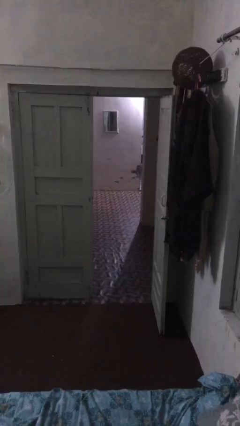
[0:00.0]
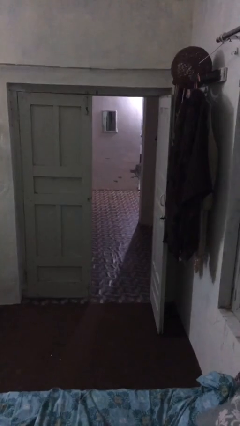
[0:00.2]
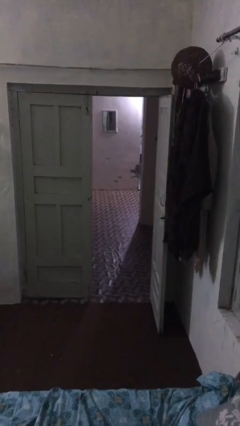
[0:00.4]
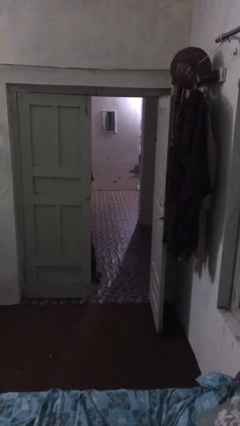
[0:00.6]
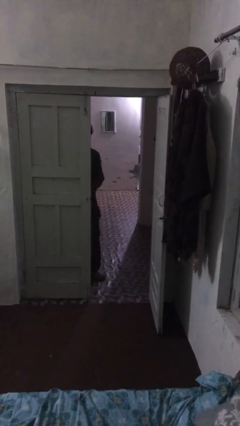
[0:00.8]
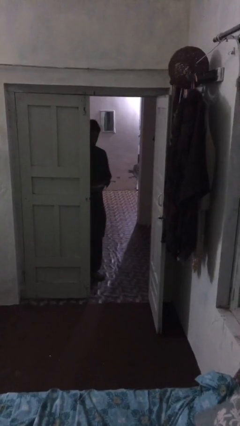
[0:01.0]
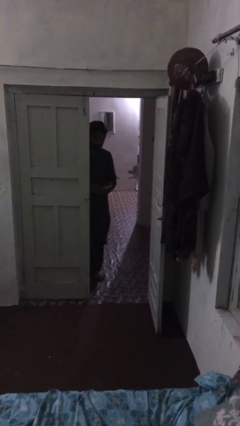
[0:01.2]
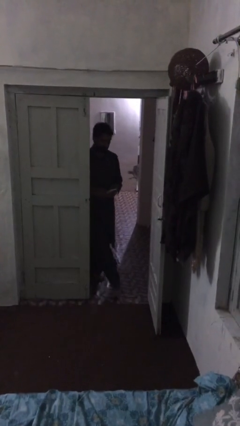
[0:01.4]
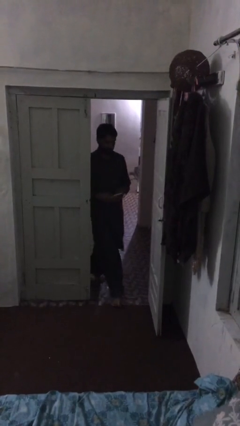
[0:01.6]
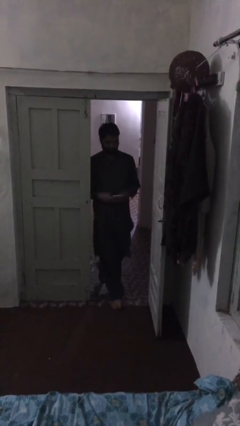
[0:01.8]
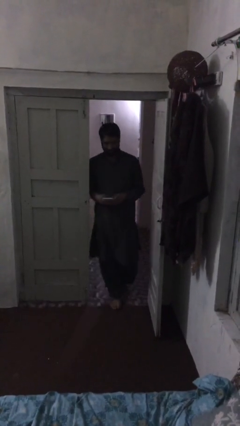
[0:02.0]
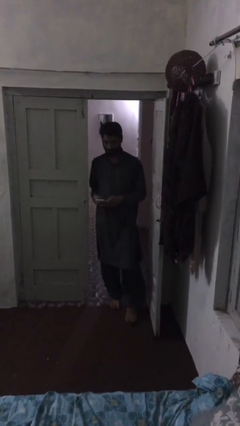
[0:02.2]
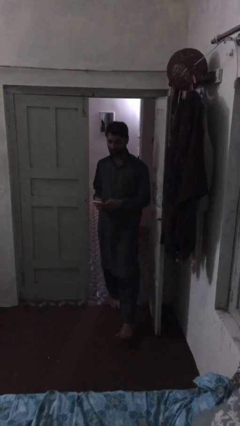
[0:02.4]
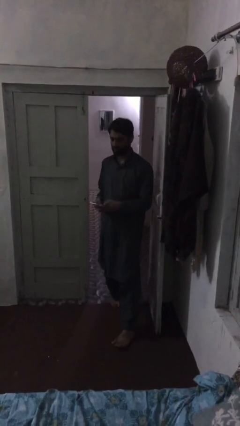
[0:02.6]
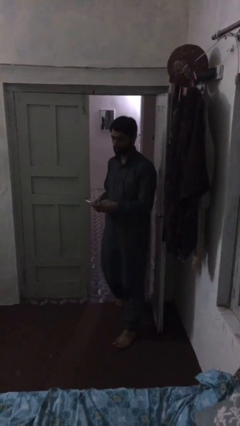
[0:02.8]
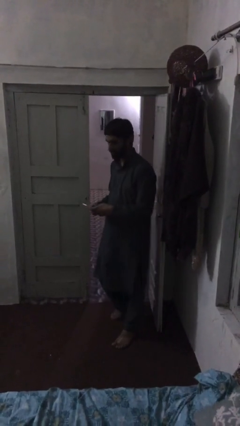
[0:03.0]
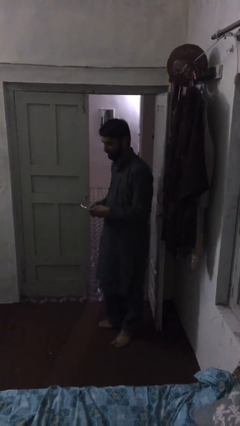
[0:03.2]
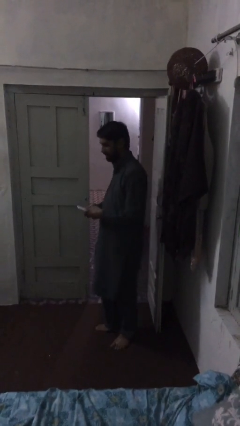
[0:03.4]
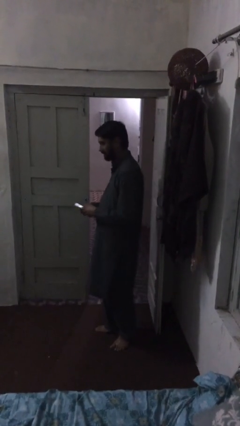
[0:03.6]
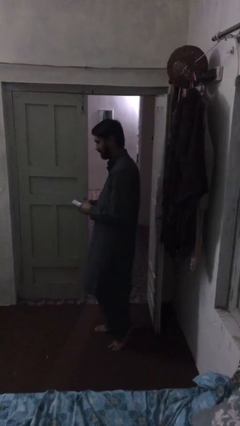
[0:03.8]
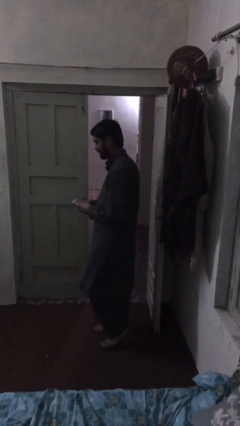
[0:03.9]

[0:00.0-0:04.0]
person enters scene through structure

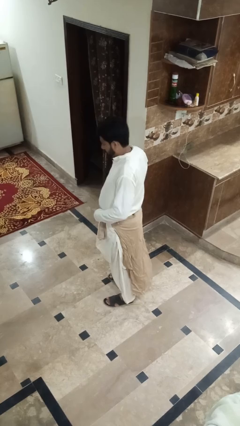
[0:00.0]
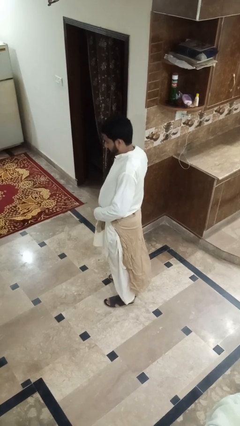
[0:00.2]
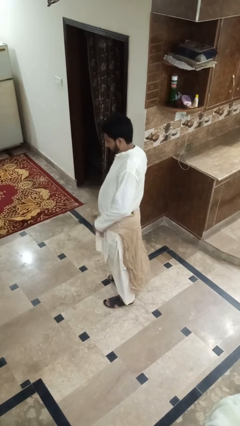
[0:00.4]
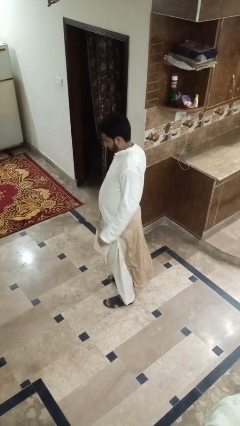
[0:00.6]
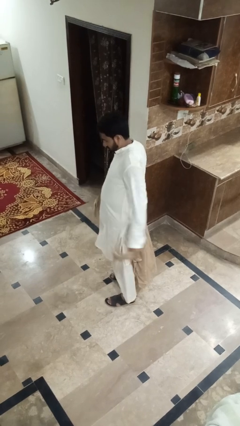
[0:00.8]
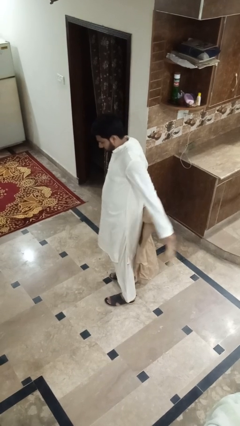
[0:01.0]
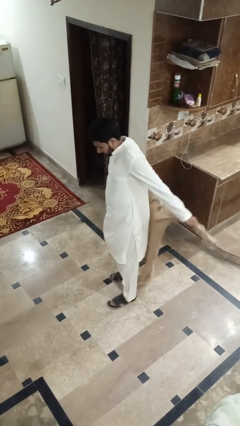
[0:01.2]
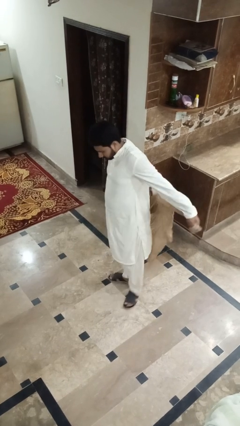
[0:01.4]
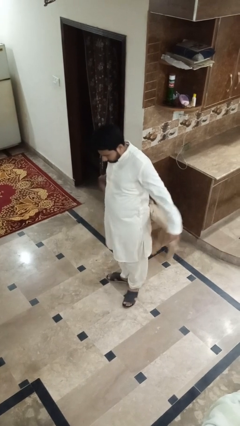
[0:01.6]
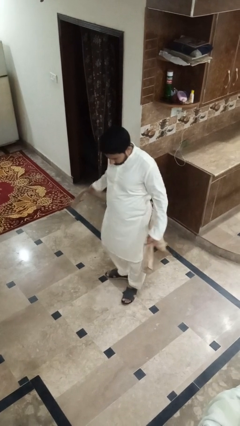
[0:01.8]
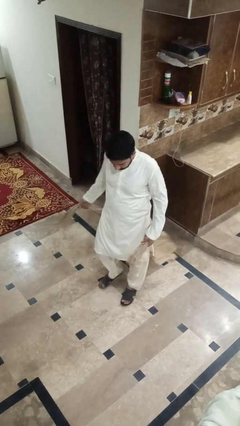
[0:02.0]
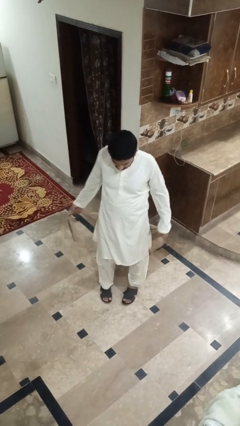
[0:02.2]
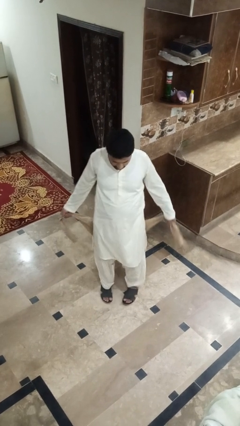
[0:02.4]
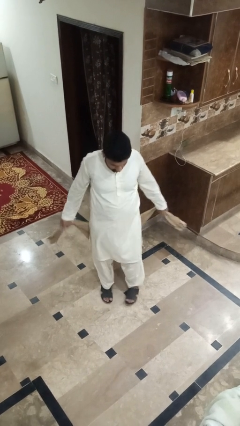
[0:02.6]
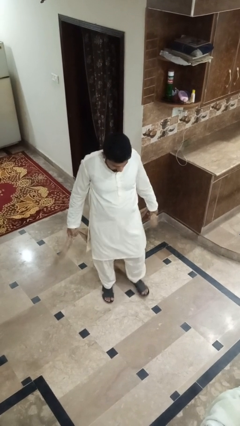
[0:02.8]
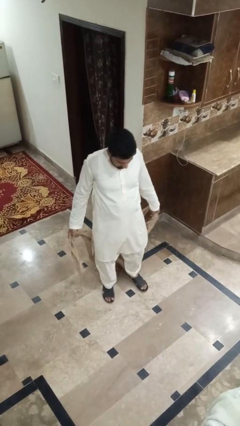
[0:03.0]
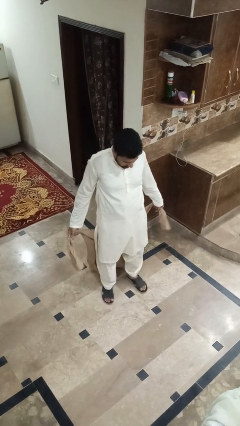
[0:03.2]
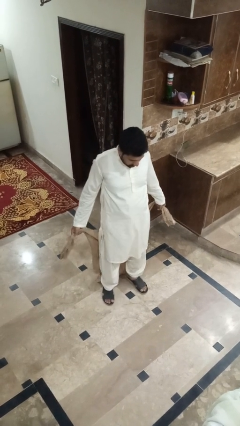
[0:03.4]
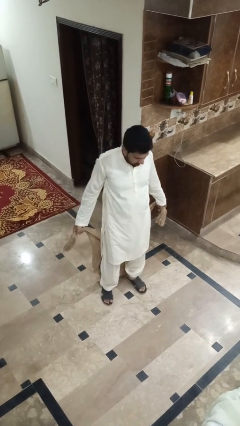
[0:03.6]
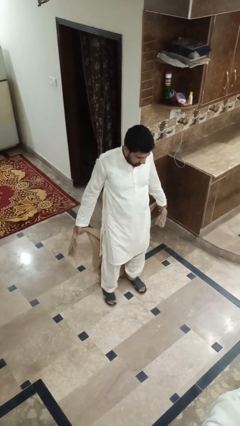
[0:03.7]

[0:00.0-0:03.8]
person unties jacket around waist

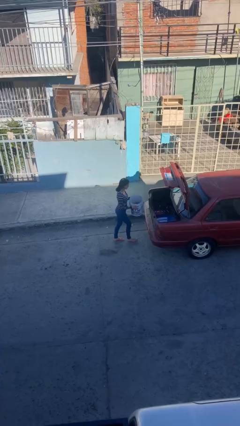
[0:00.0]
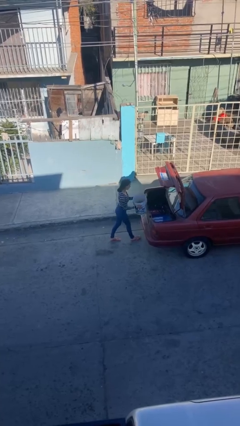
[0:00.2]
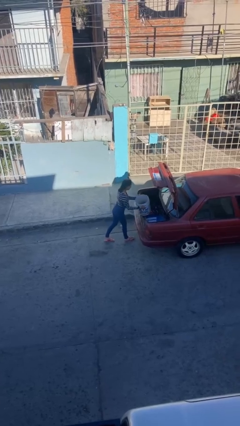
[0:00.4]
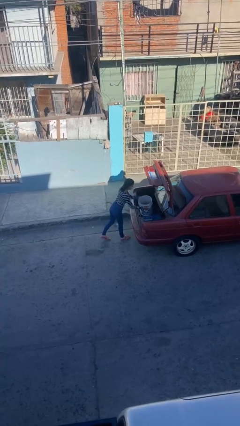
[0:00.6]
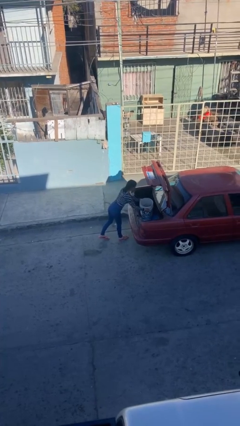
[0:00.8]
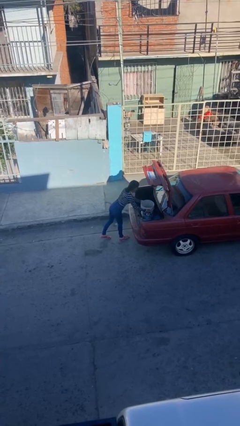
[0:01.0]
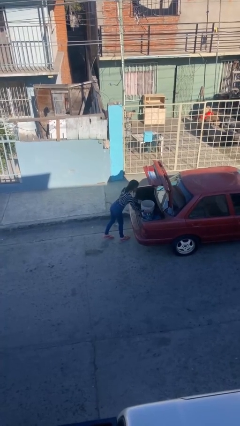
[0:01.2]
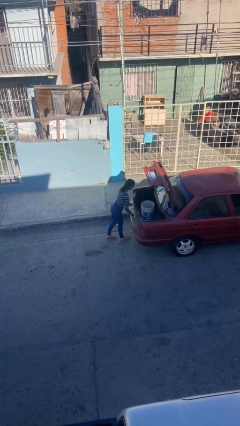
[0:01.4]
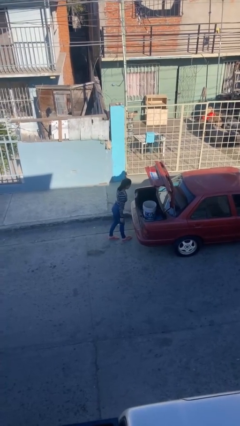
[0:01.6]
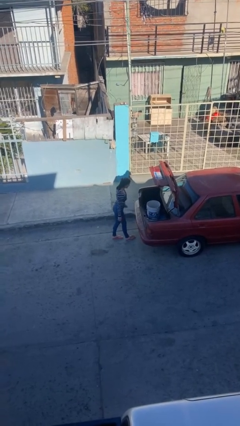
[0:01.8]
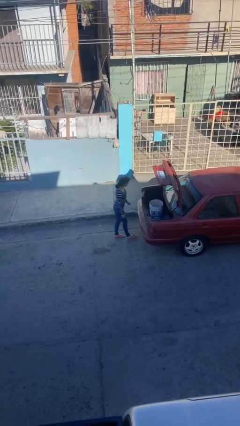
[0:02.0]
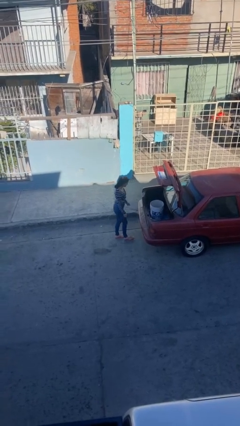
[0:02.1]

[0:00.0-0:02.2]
person loads car

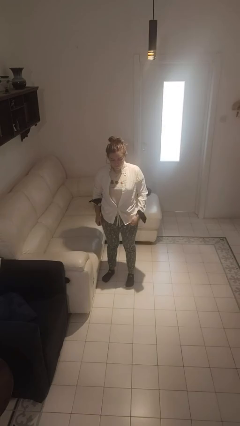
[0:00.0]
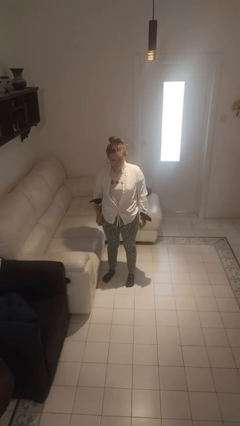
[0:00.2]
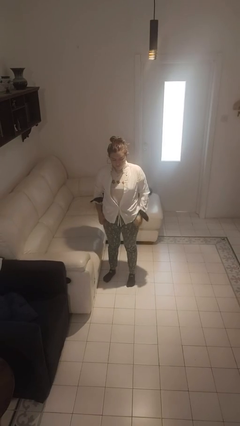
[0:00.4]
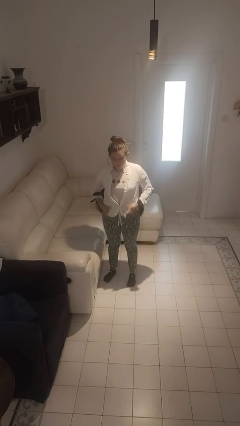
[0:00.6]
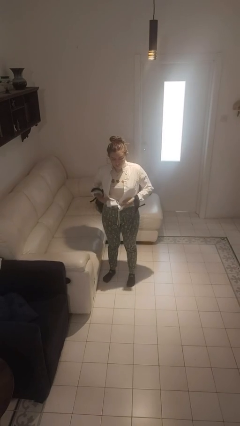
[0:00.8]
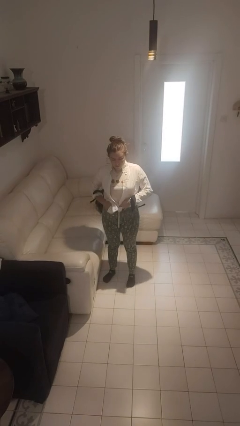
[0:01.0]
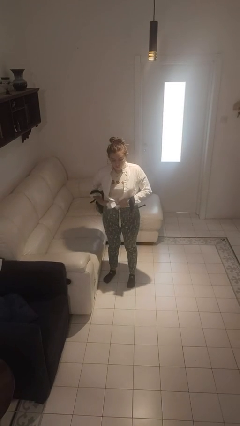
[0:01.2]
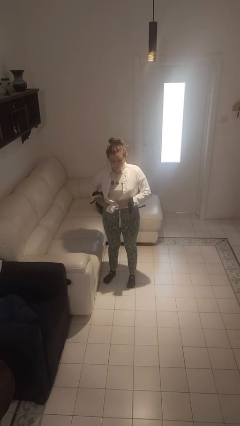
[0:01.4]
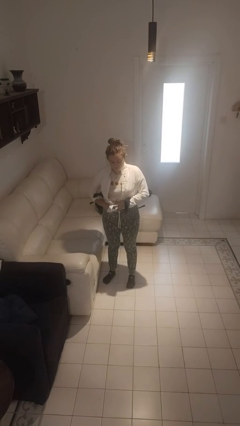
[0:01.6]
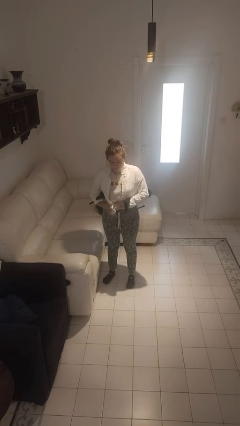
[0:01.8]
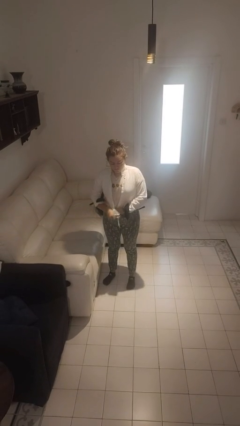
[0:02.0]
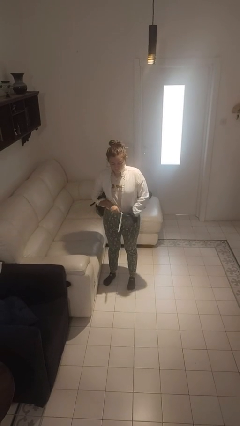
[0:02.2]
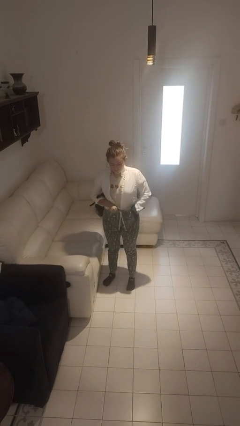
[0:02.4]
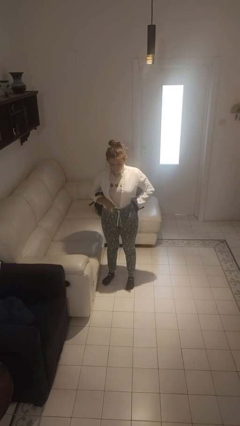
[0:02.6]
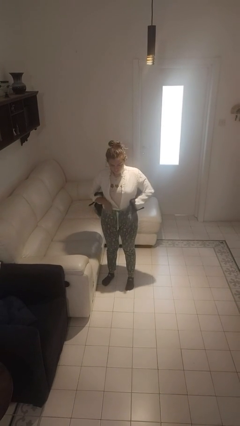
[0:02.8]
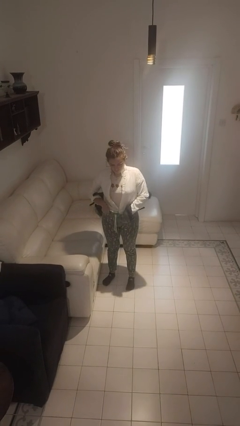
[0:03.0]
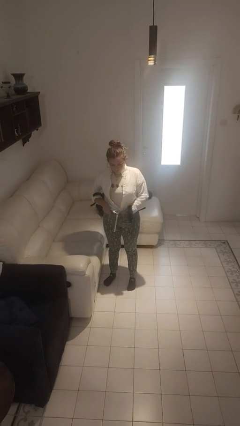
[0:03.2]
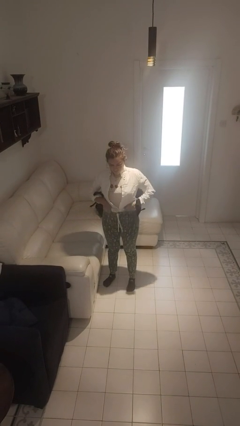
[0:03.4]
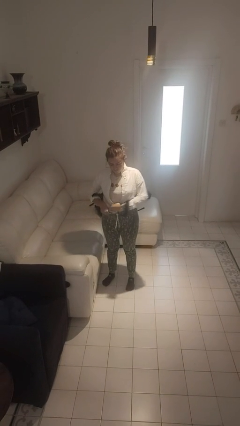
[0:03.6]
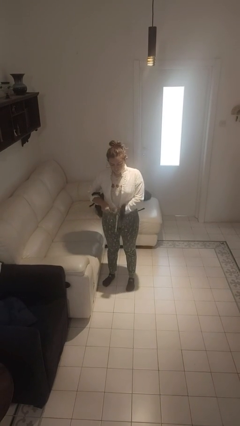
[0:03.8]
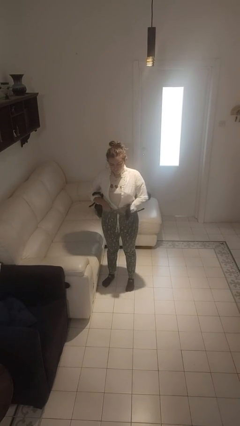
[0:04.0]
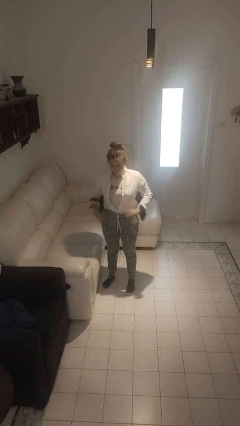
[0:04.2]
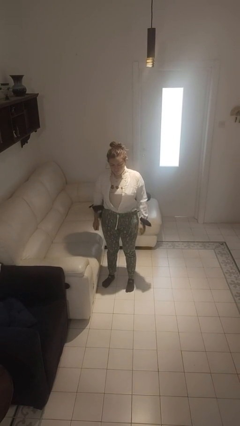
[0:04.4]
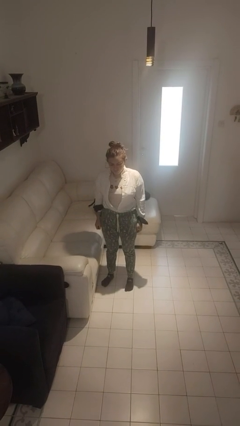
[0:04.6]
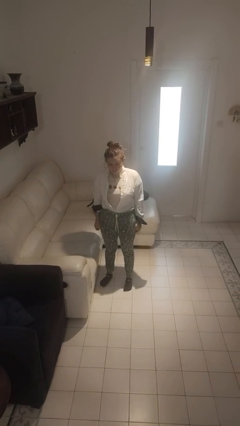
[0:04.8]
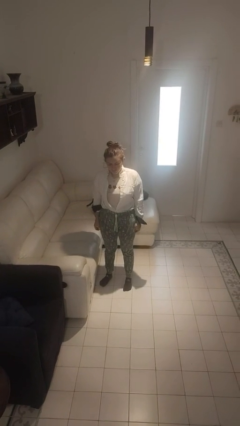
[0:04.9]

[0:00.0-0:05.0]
person tucks in shirt

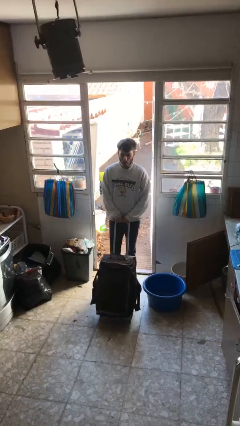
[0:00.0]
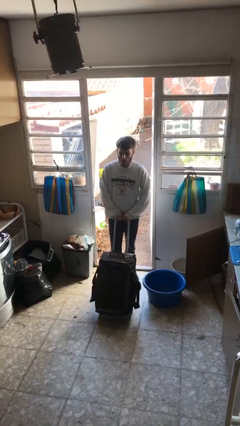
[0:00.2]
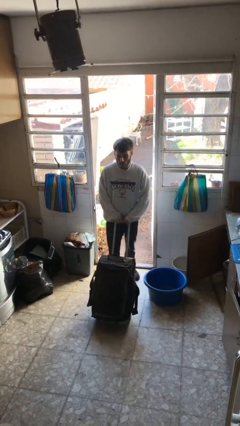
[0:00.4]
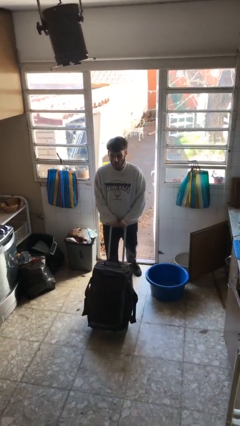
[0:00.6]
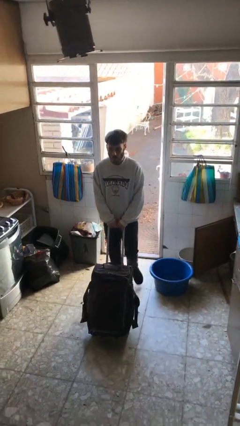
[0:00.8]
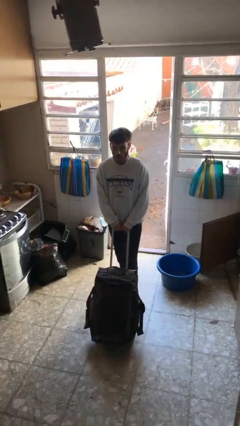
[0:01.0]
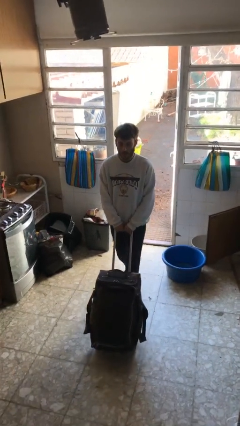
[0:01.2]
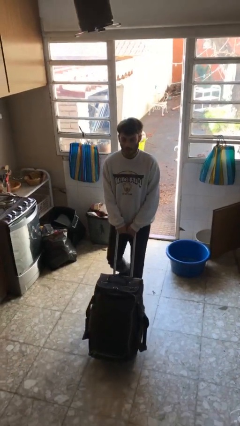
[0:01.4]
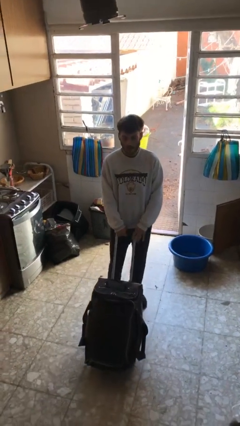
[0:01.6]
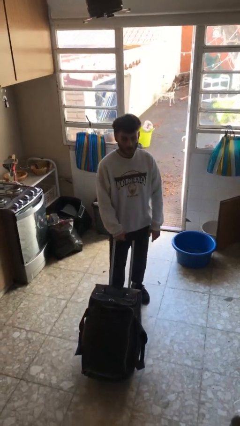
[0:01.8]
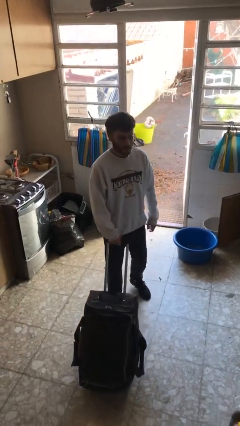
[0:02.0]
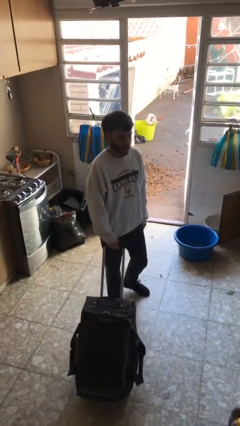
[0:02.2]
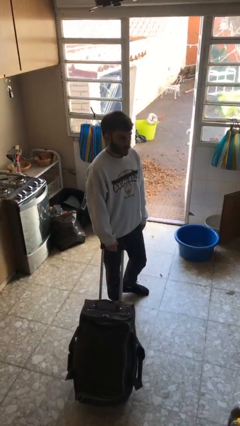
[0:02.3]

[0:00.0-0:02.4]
person pushes wheeled cart

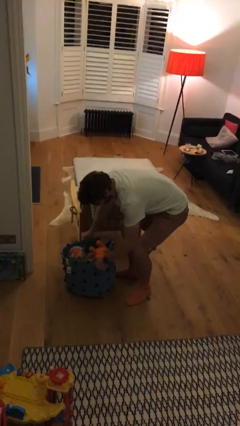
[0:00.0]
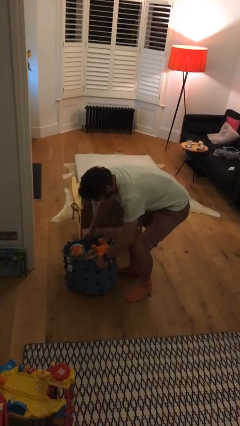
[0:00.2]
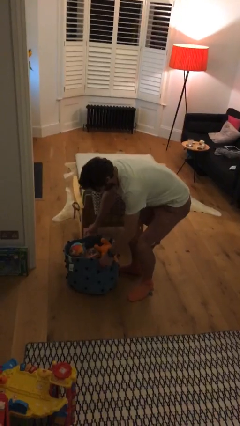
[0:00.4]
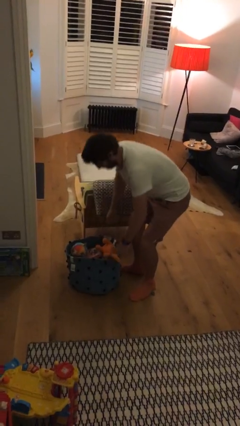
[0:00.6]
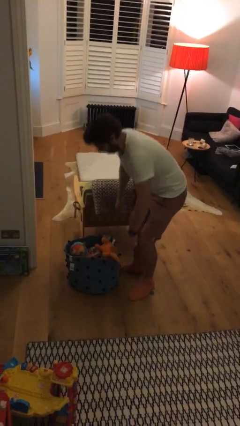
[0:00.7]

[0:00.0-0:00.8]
person puts down object on floor
